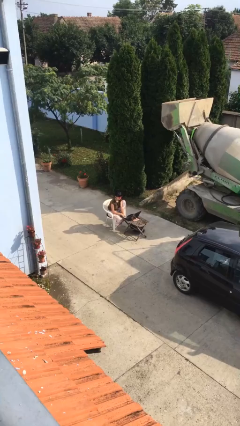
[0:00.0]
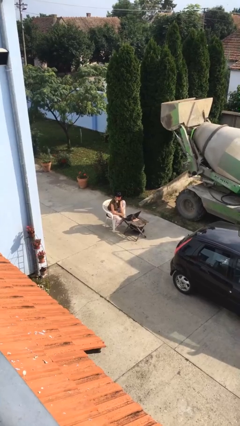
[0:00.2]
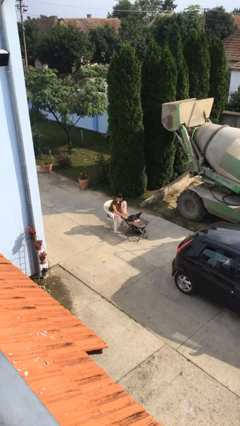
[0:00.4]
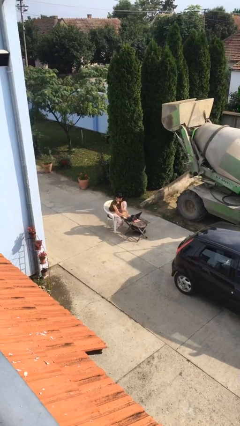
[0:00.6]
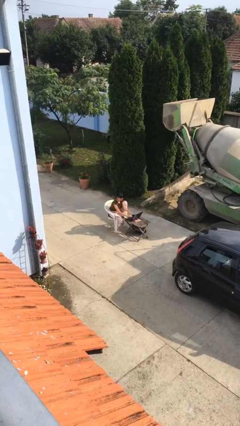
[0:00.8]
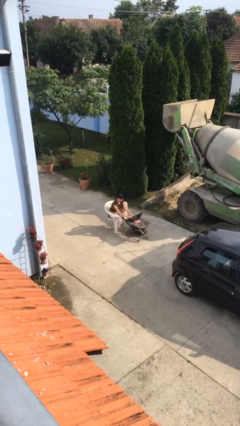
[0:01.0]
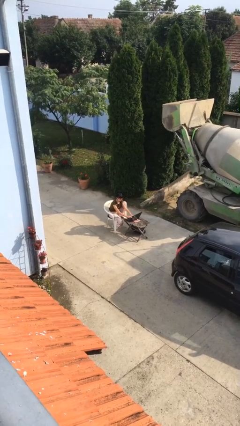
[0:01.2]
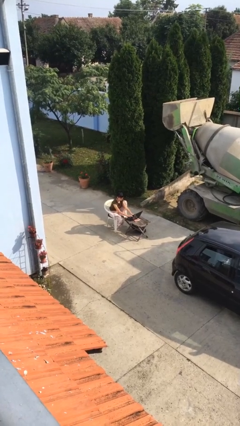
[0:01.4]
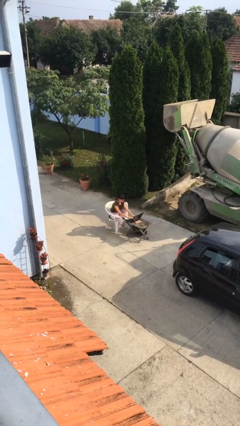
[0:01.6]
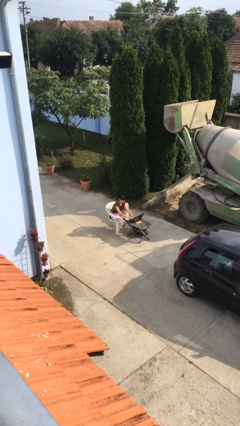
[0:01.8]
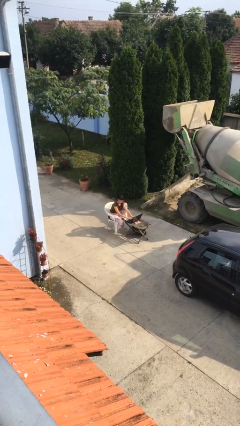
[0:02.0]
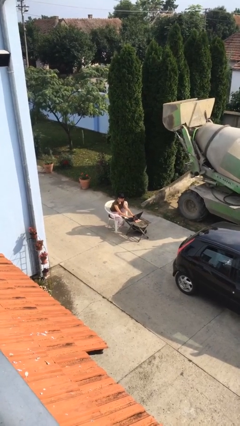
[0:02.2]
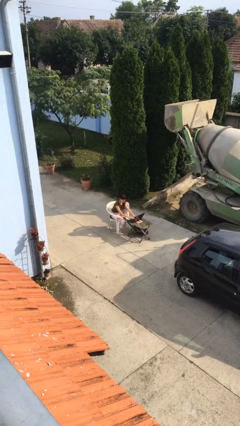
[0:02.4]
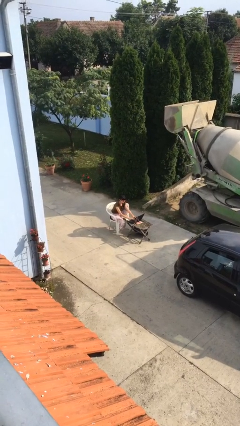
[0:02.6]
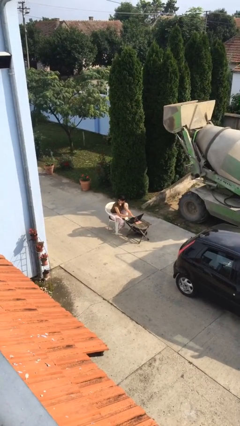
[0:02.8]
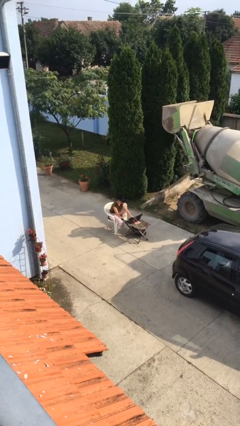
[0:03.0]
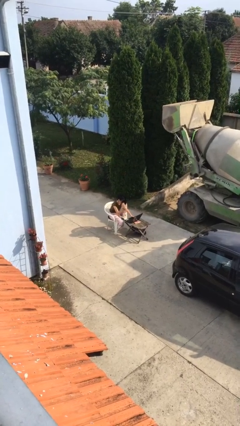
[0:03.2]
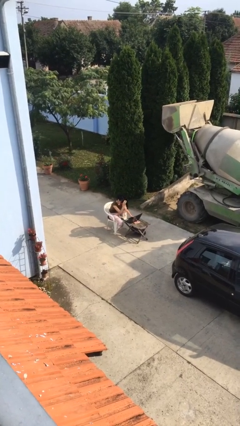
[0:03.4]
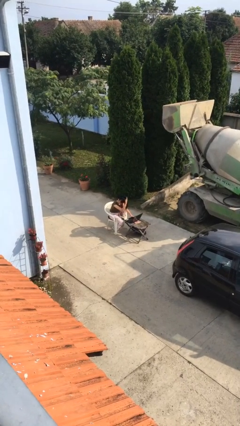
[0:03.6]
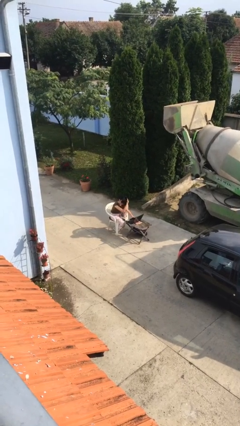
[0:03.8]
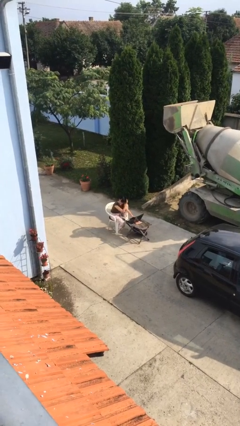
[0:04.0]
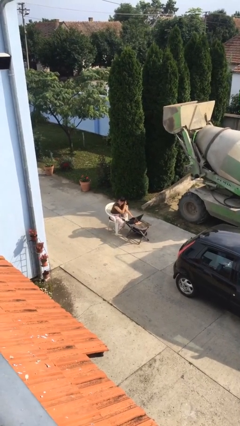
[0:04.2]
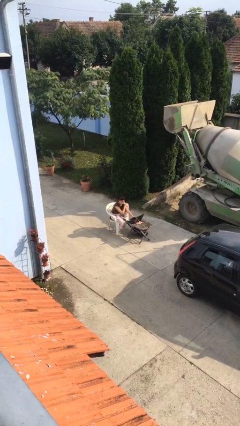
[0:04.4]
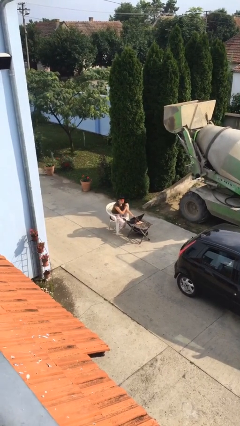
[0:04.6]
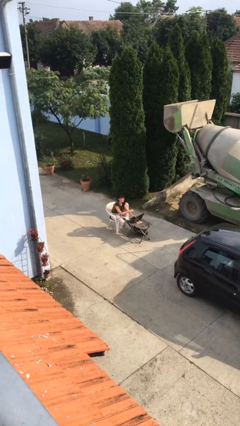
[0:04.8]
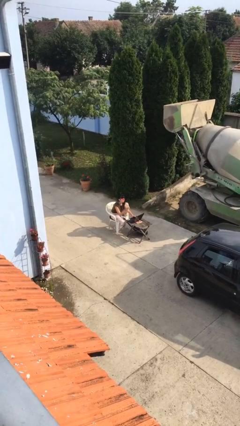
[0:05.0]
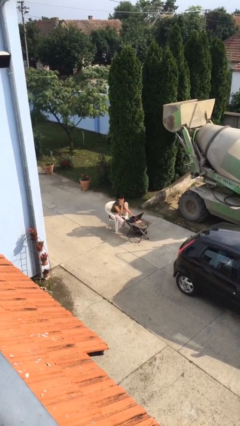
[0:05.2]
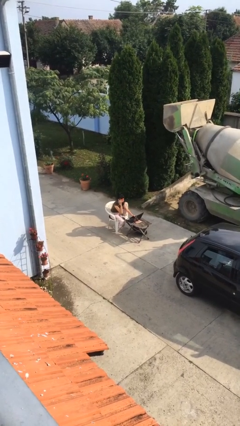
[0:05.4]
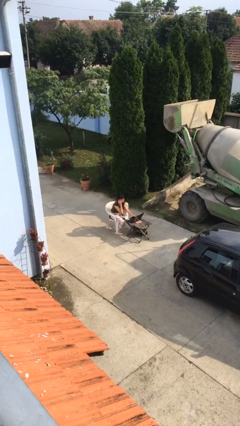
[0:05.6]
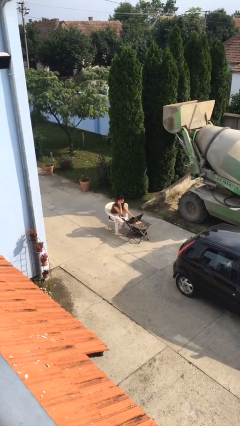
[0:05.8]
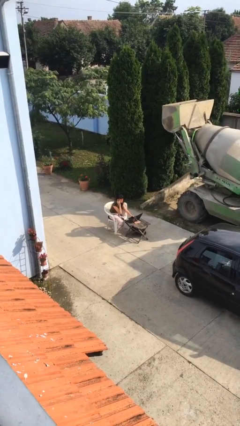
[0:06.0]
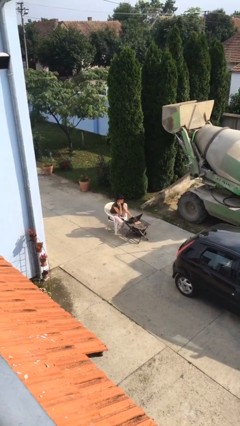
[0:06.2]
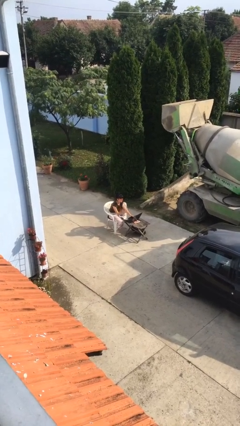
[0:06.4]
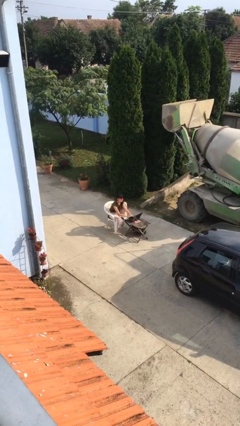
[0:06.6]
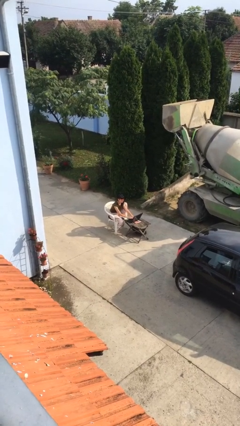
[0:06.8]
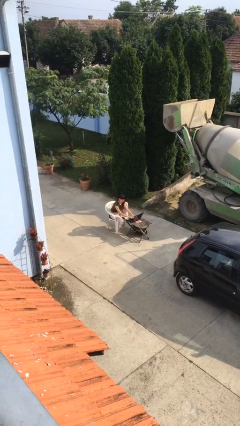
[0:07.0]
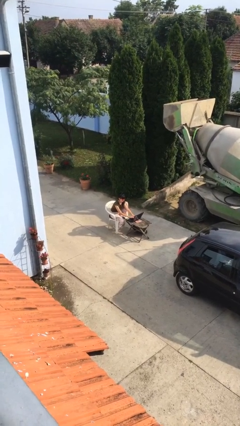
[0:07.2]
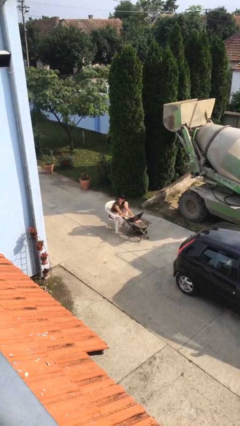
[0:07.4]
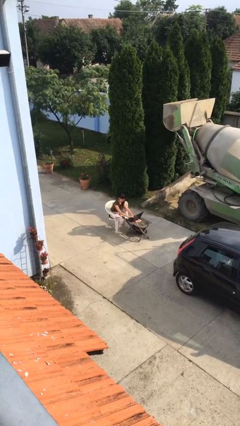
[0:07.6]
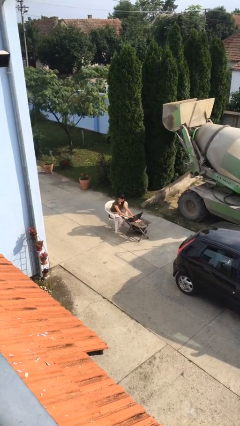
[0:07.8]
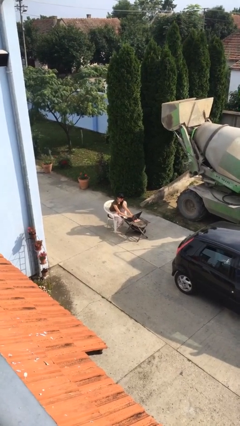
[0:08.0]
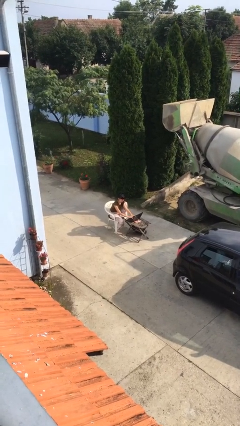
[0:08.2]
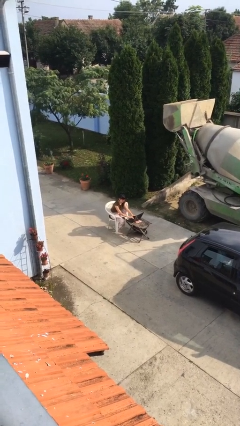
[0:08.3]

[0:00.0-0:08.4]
person interacts with laptop

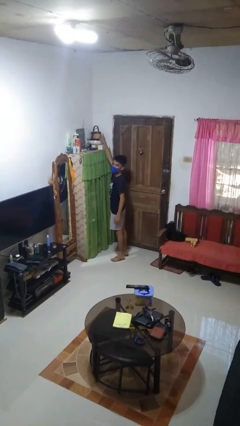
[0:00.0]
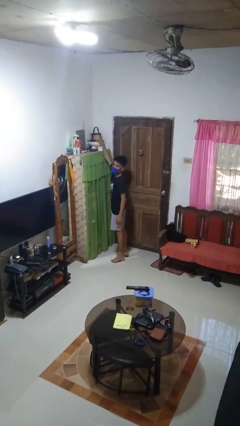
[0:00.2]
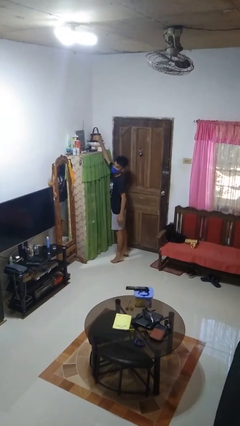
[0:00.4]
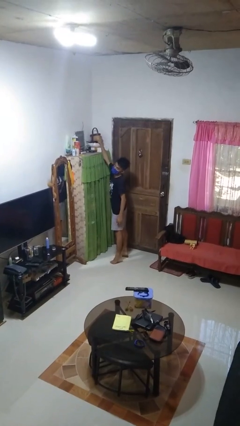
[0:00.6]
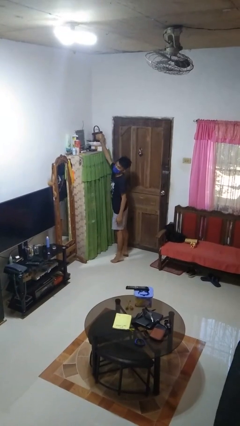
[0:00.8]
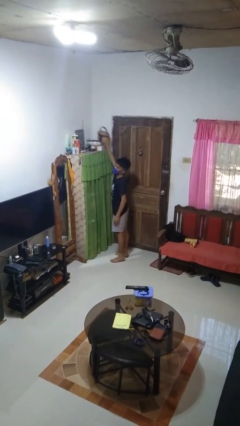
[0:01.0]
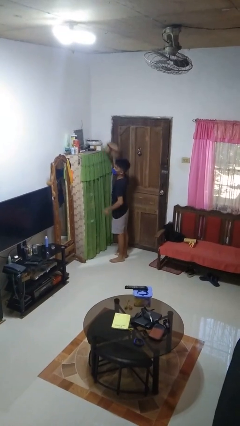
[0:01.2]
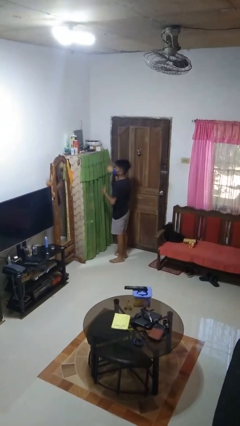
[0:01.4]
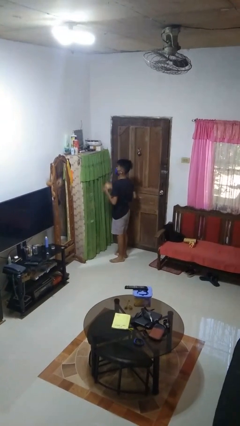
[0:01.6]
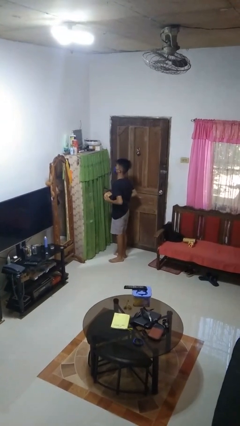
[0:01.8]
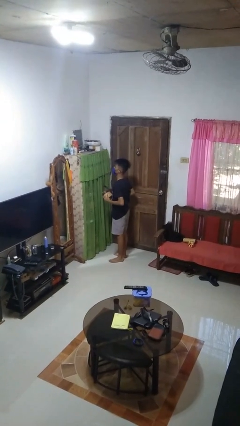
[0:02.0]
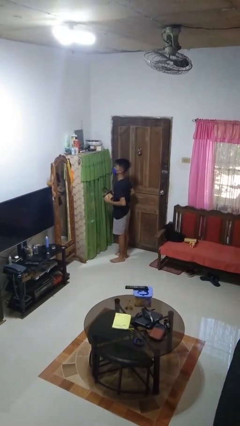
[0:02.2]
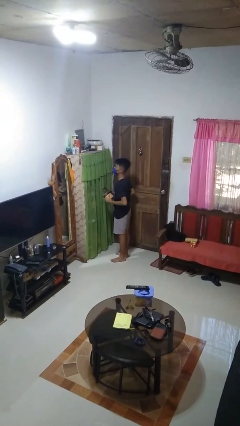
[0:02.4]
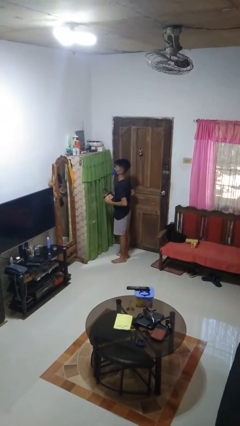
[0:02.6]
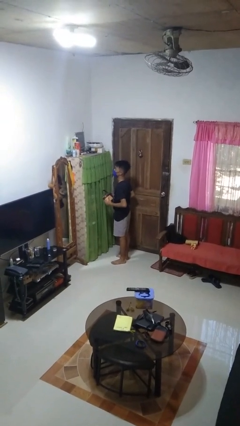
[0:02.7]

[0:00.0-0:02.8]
person picks up object from shelf

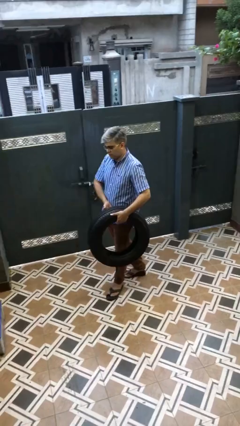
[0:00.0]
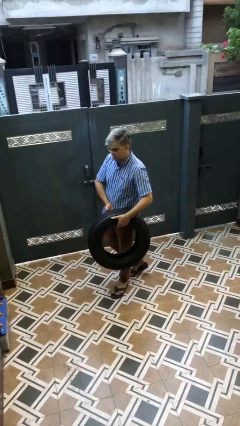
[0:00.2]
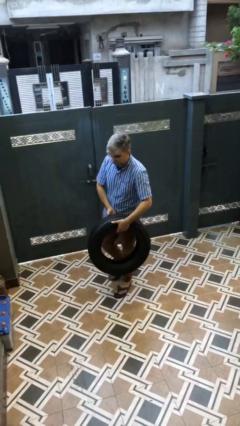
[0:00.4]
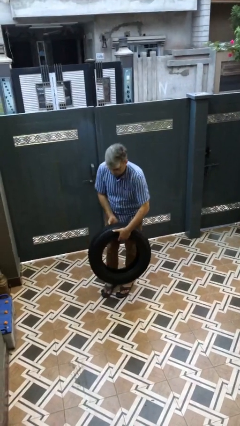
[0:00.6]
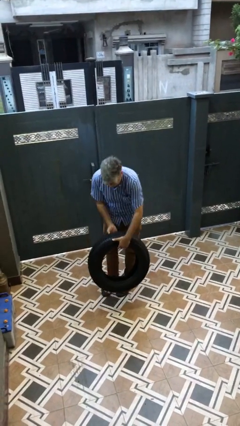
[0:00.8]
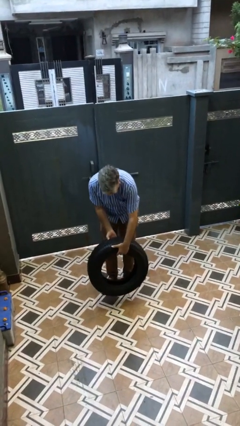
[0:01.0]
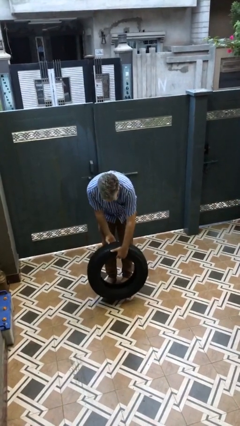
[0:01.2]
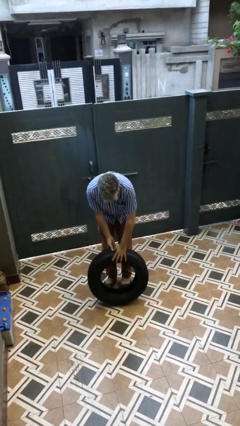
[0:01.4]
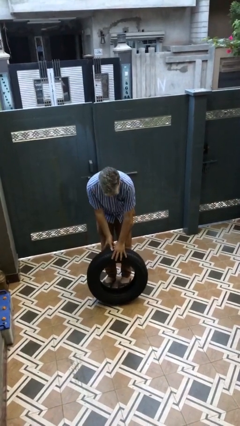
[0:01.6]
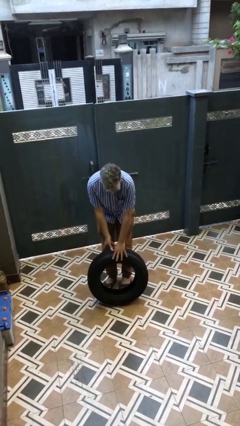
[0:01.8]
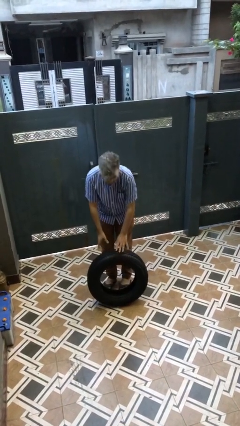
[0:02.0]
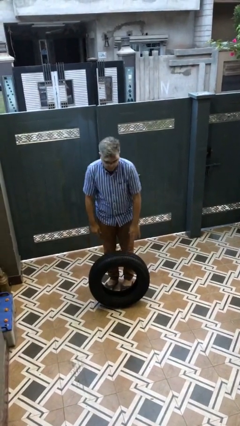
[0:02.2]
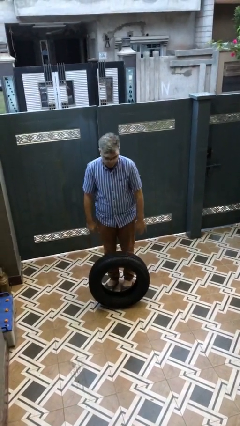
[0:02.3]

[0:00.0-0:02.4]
person puts down object on floor

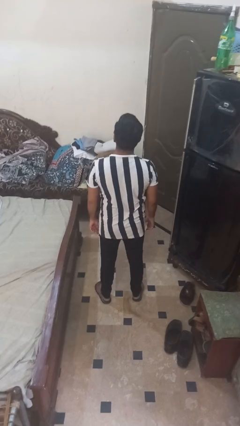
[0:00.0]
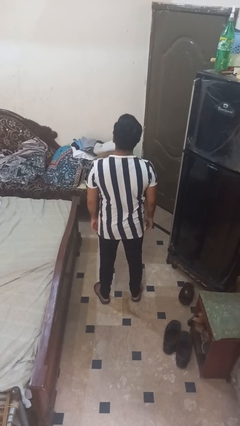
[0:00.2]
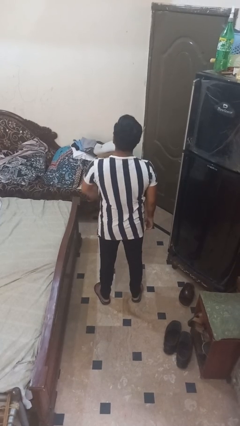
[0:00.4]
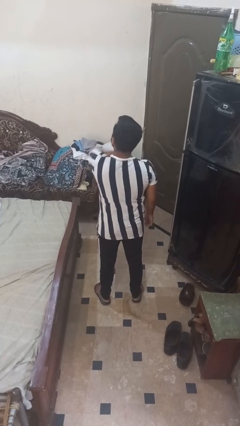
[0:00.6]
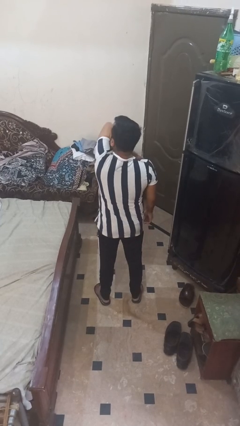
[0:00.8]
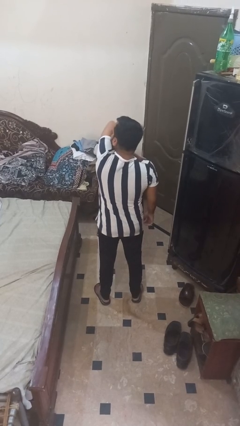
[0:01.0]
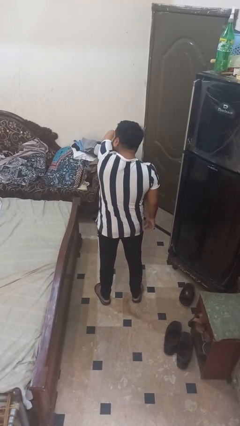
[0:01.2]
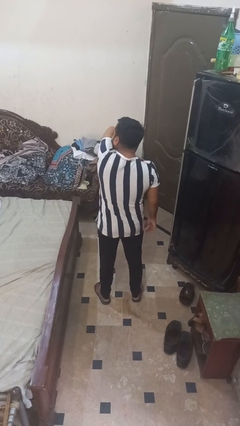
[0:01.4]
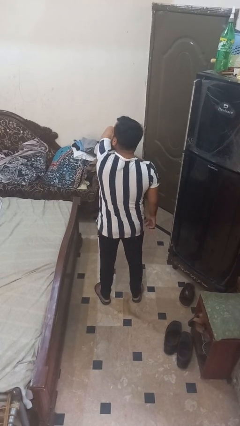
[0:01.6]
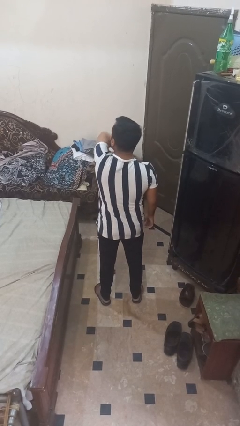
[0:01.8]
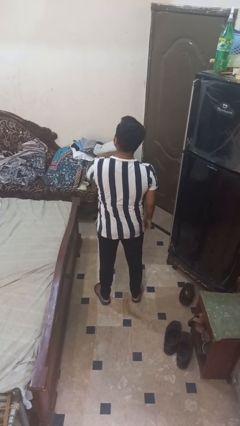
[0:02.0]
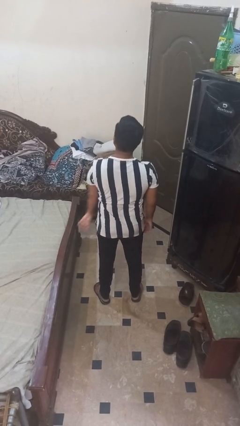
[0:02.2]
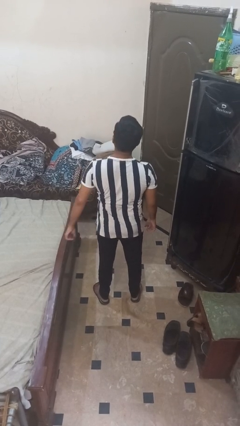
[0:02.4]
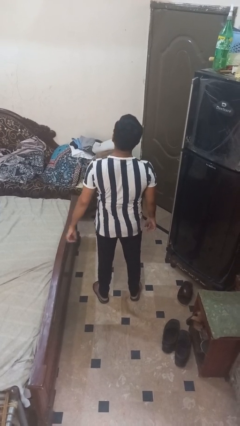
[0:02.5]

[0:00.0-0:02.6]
person sneezes into arm

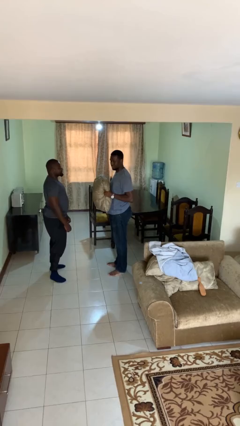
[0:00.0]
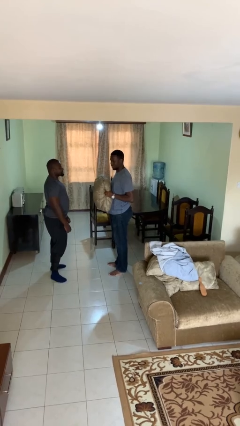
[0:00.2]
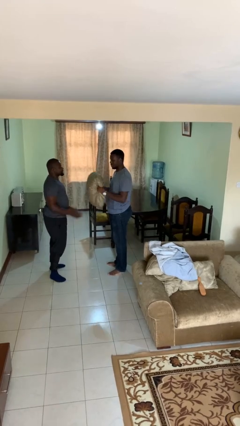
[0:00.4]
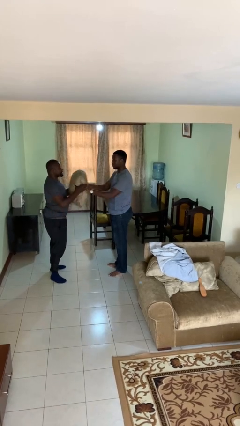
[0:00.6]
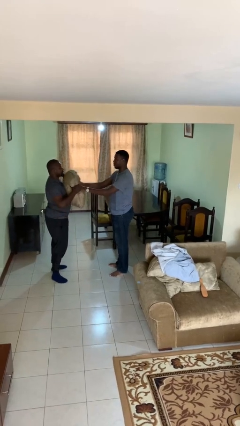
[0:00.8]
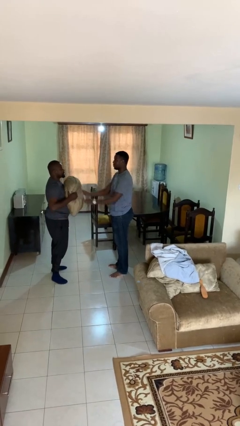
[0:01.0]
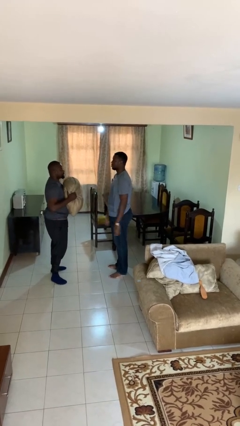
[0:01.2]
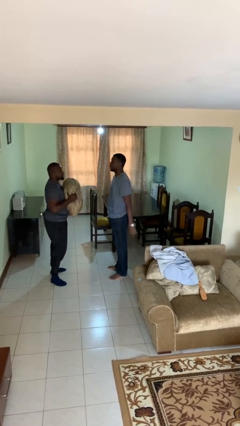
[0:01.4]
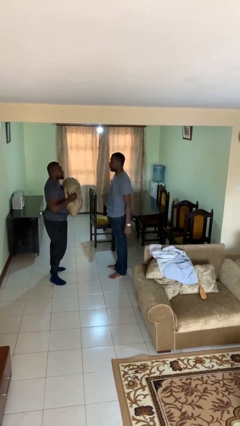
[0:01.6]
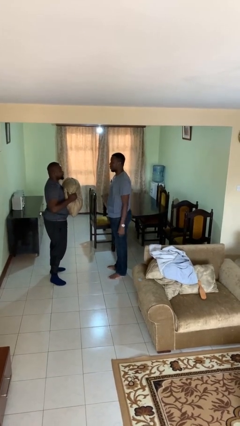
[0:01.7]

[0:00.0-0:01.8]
person transfers object to person
